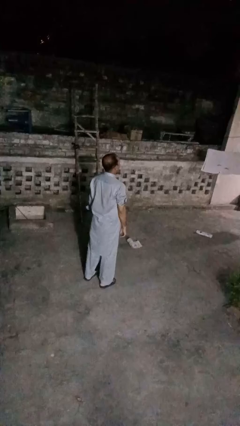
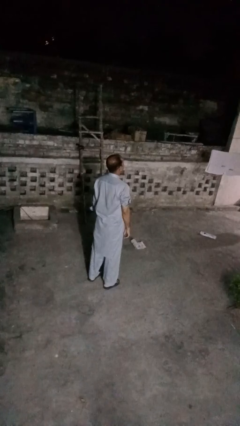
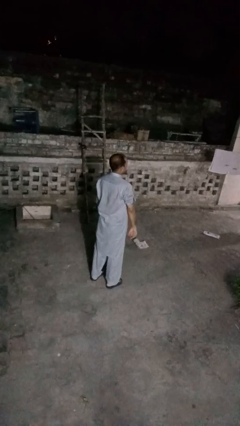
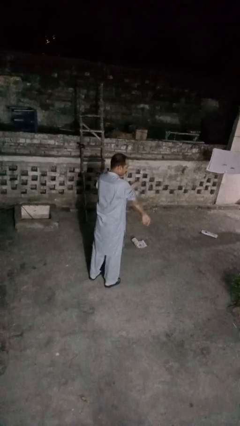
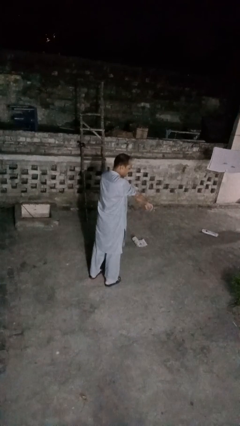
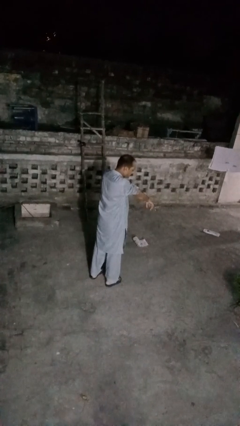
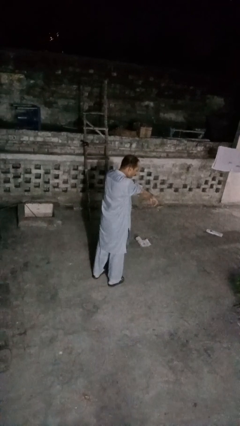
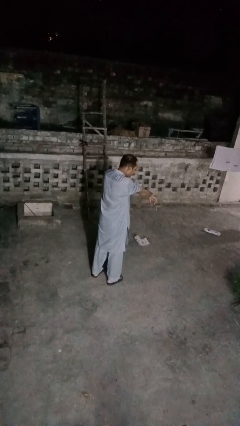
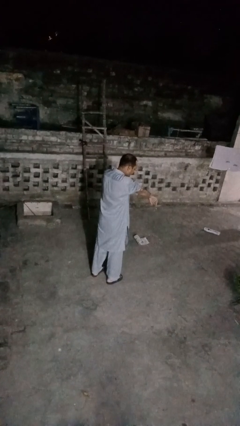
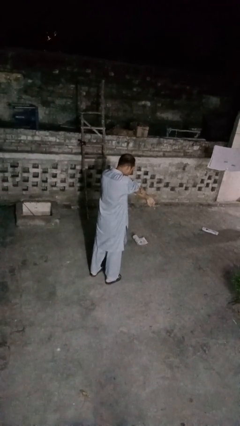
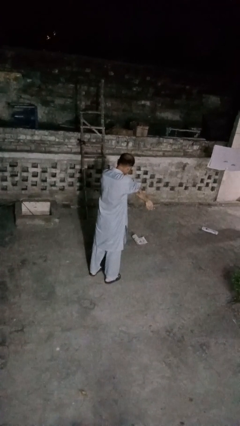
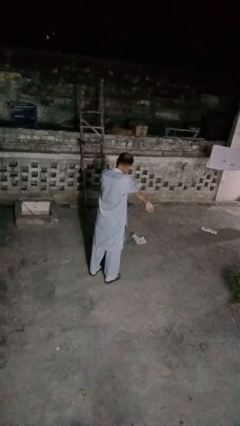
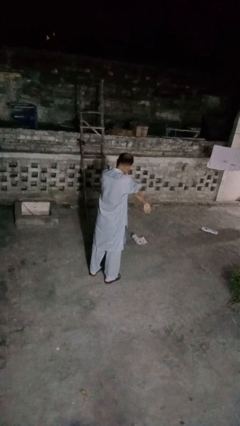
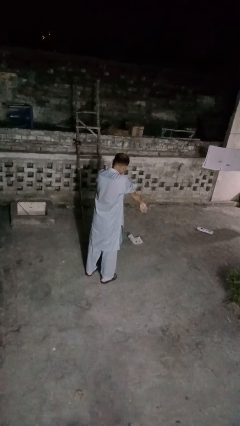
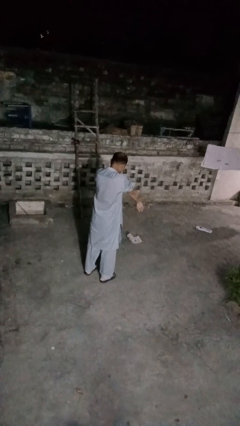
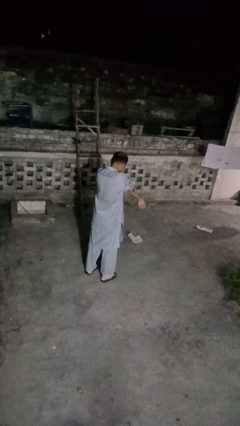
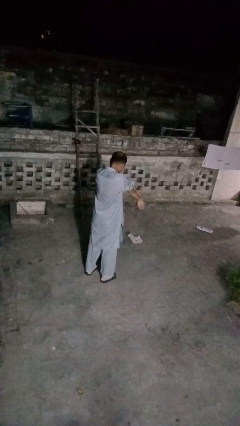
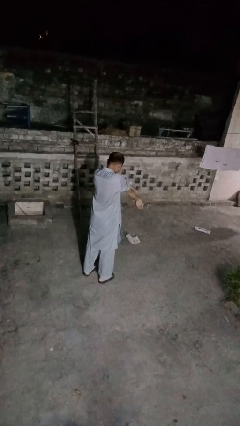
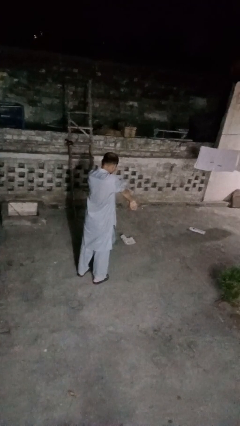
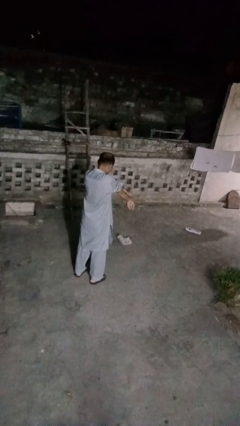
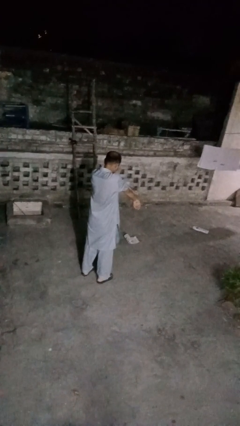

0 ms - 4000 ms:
person swats bug

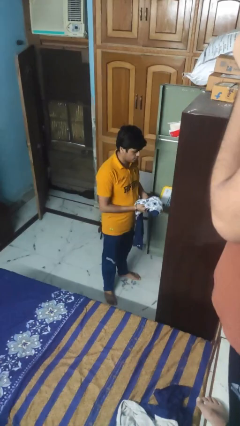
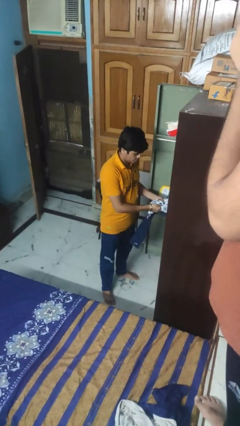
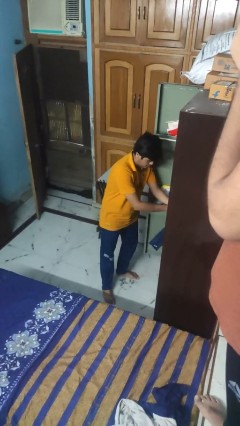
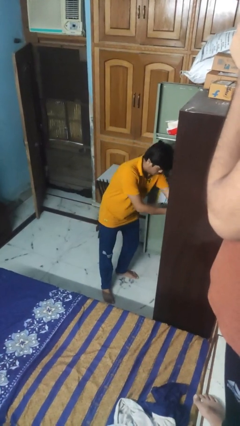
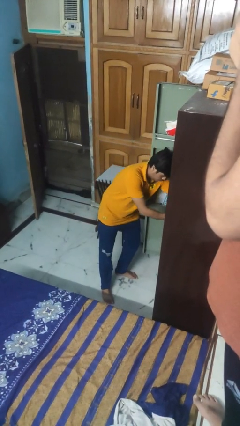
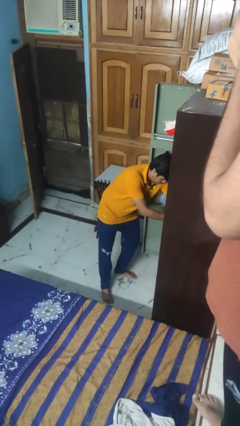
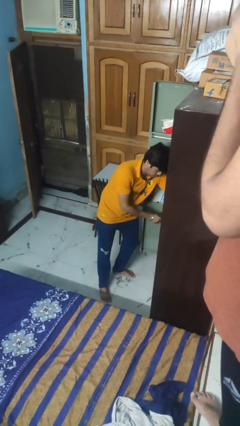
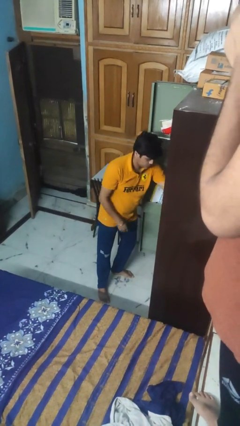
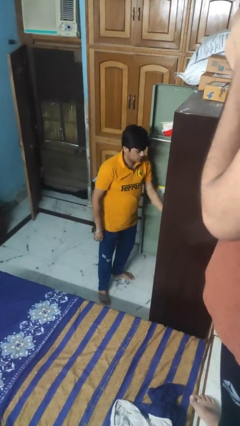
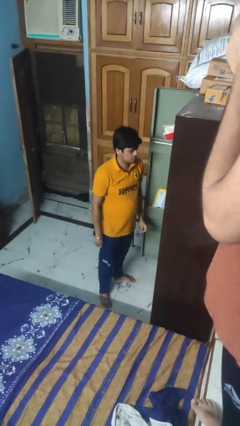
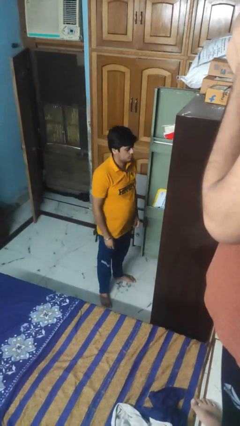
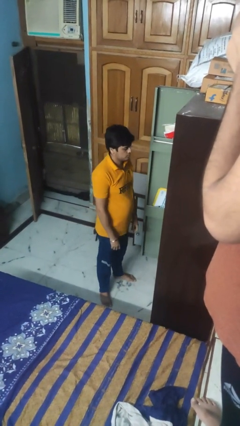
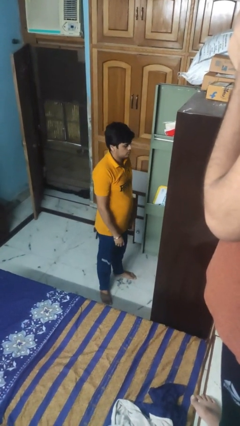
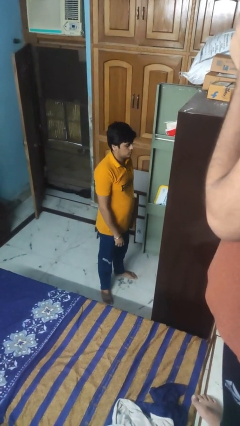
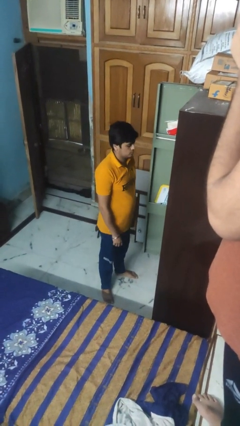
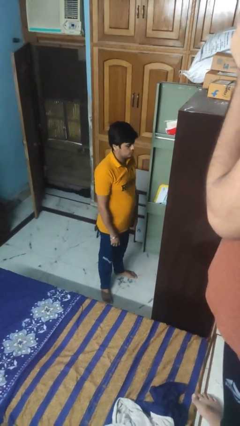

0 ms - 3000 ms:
person puts clothes into dresser

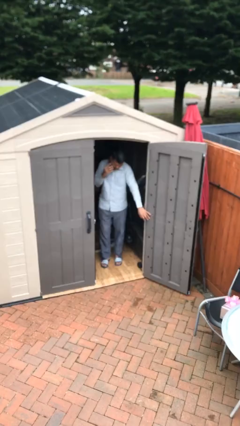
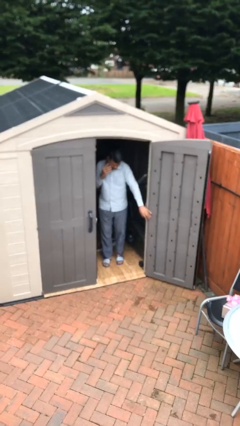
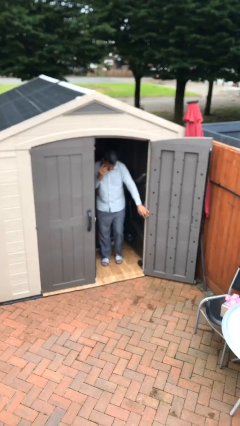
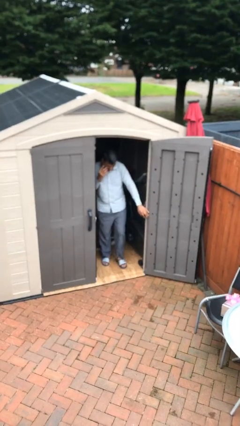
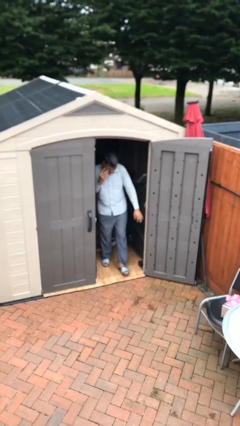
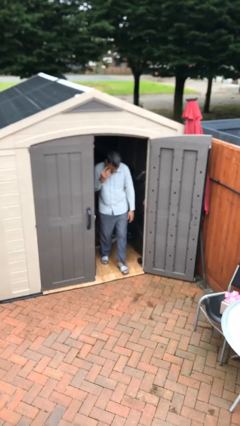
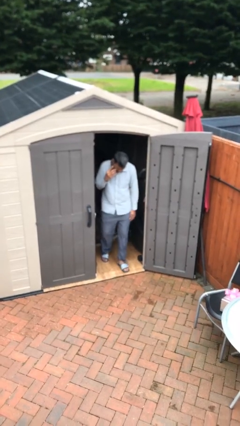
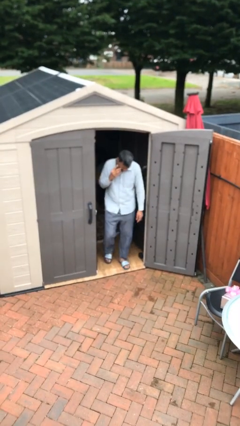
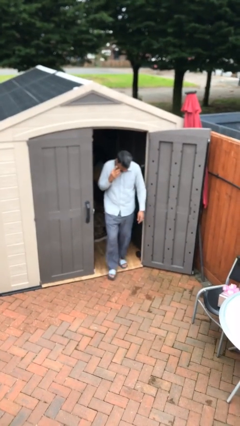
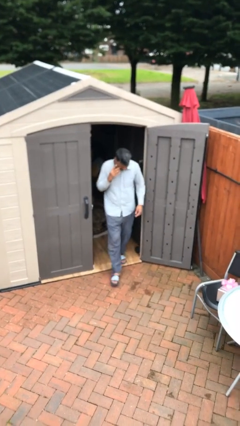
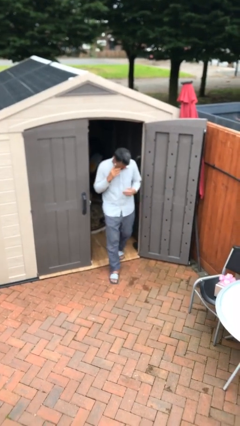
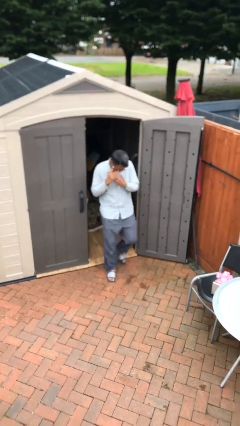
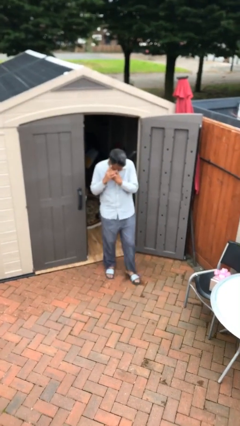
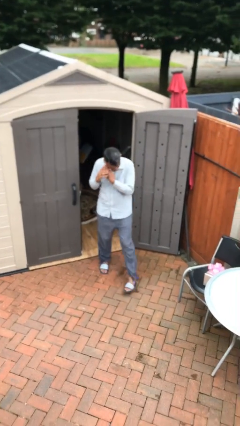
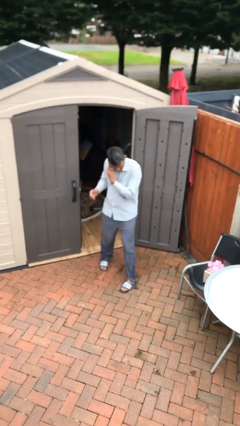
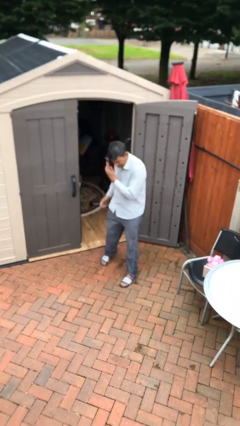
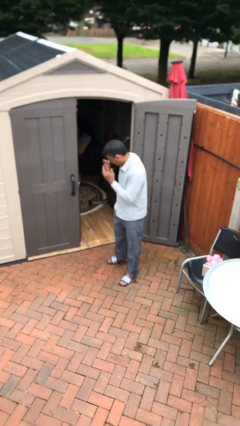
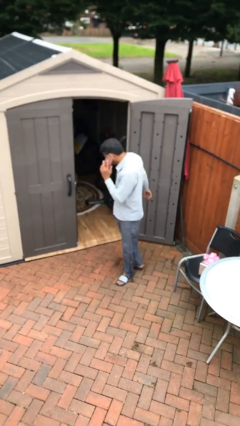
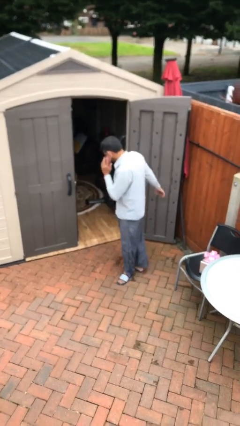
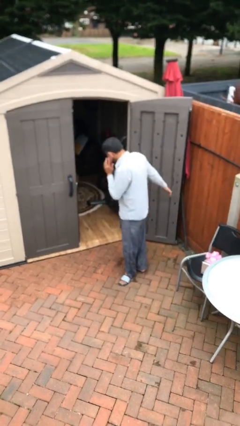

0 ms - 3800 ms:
person enters scene through structure

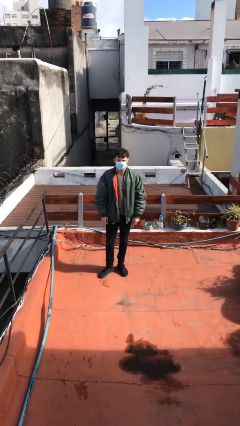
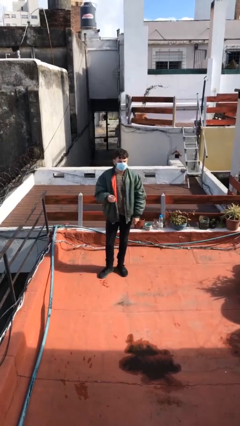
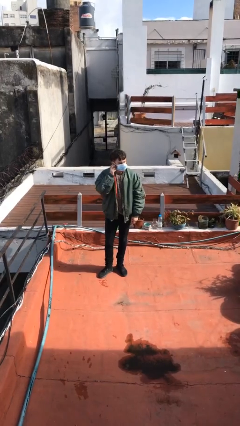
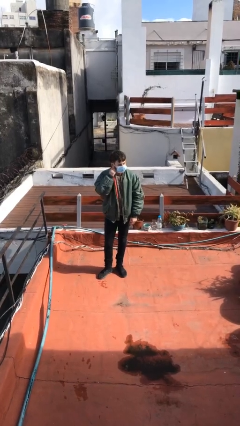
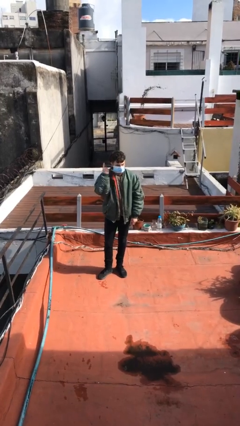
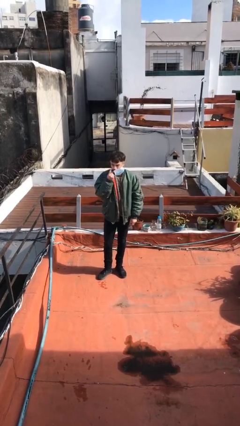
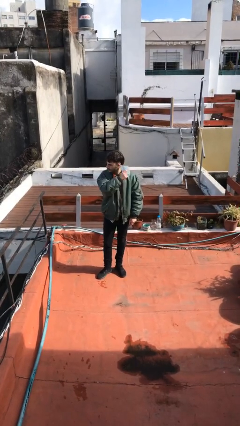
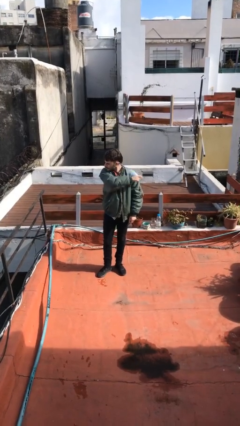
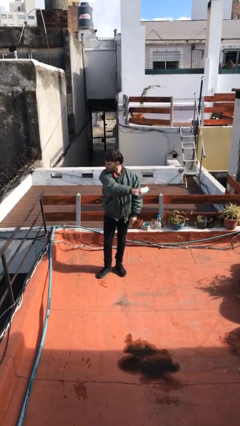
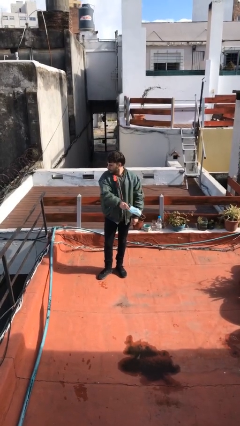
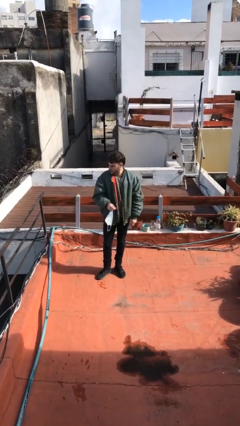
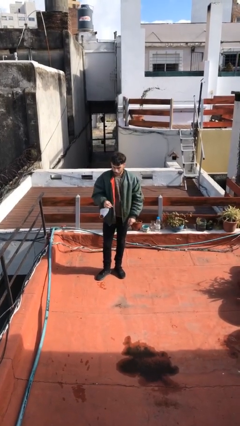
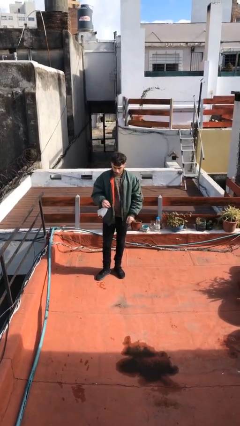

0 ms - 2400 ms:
person takes off facemask

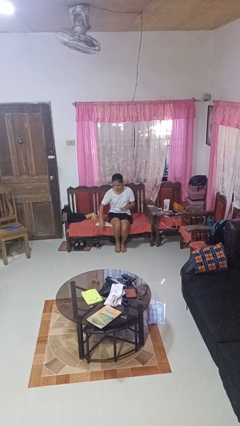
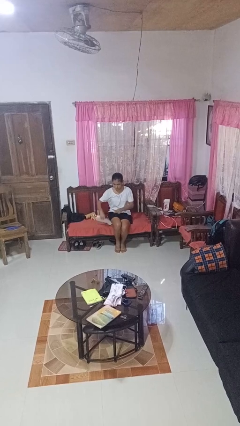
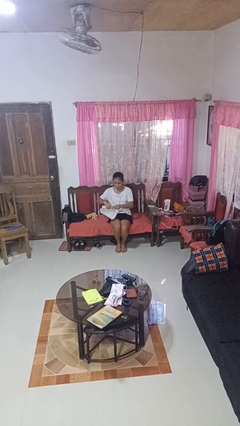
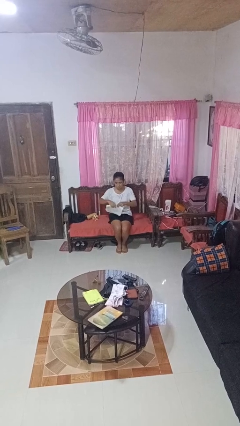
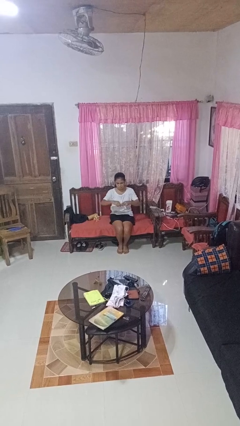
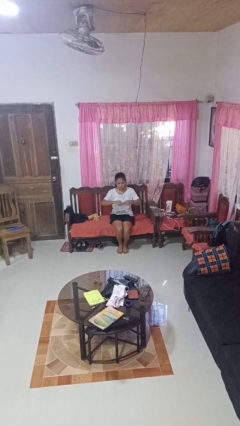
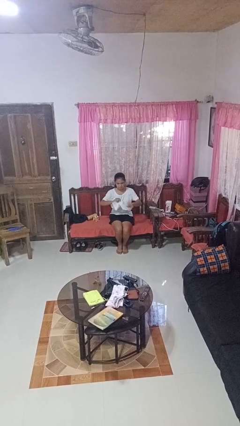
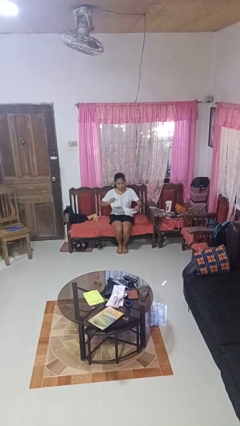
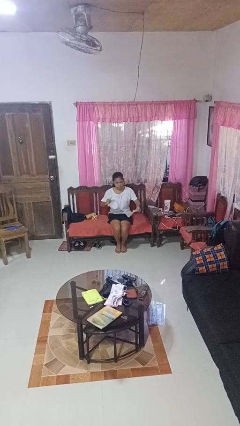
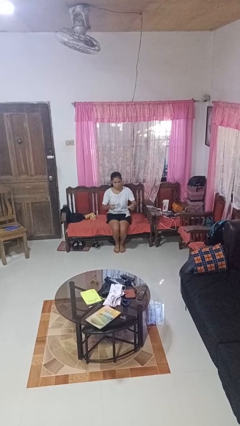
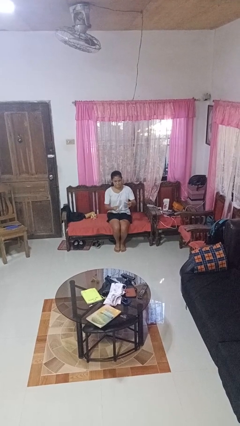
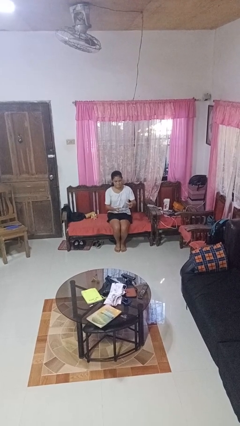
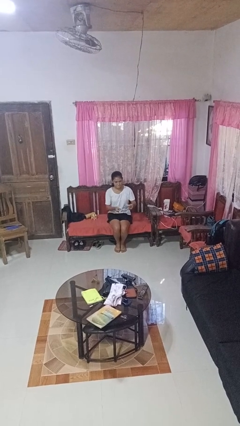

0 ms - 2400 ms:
person tears paper

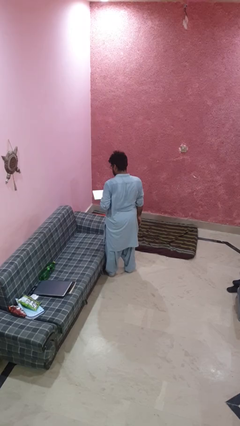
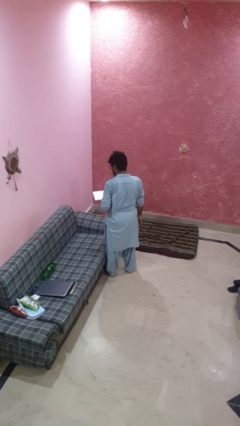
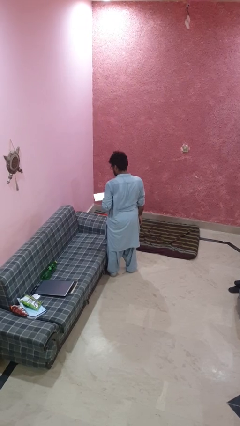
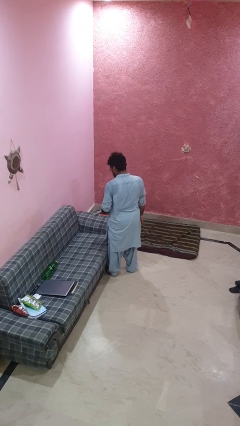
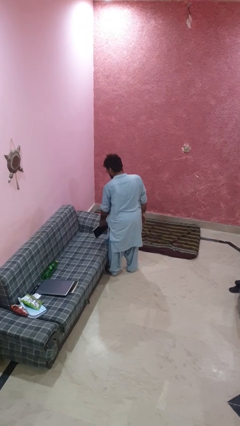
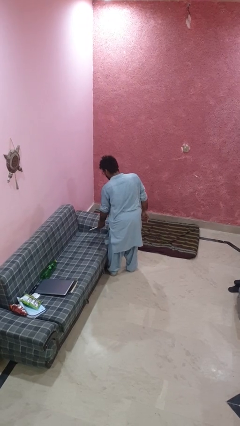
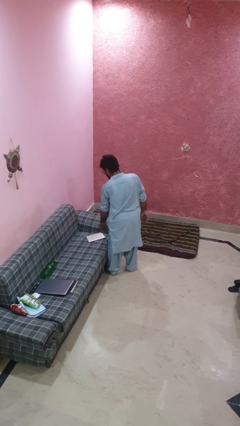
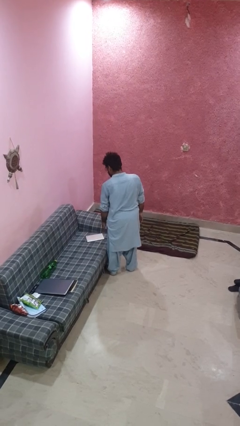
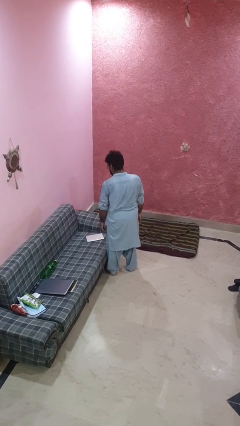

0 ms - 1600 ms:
person puts down object on couch
